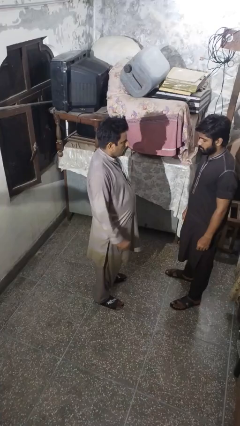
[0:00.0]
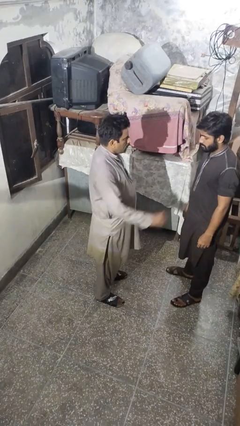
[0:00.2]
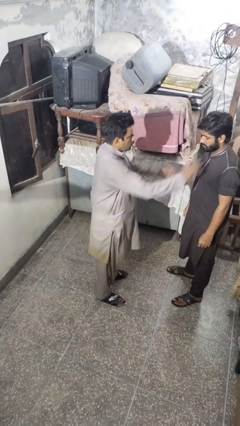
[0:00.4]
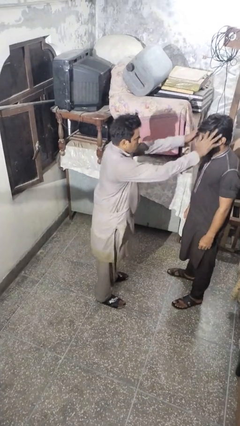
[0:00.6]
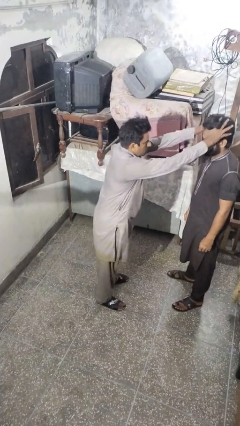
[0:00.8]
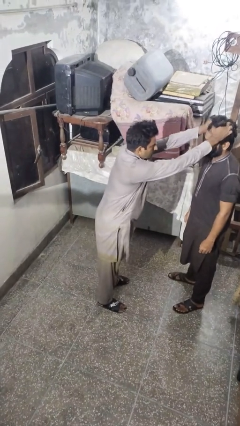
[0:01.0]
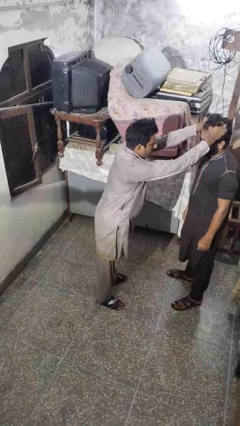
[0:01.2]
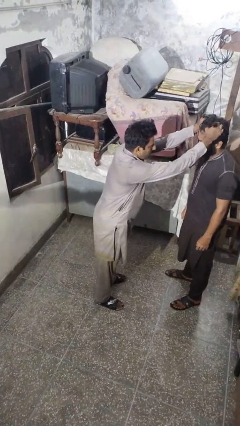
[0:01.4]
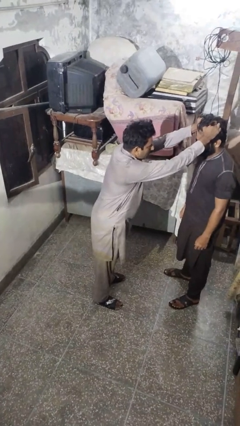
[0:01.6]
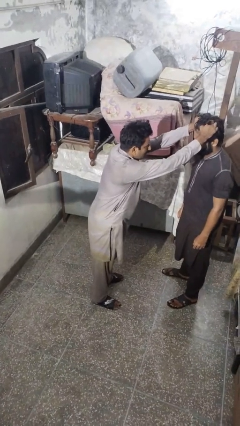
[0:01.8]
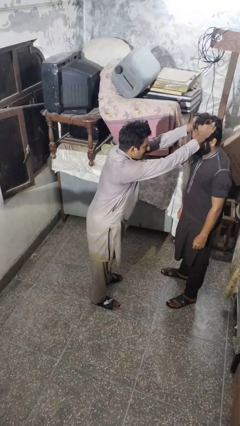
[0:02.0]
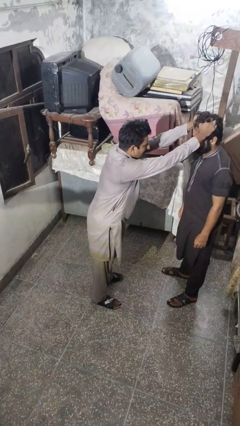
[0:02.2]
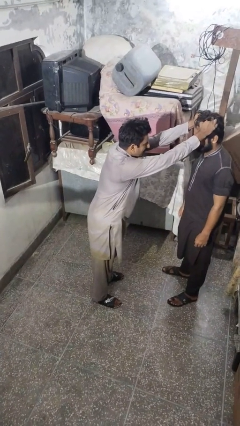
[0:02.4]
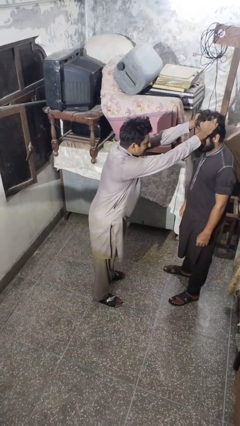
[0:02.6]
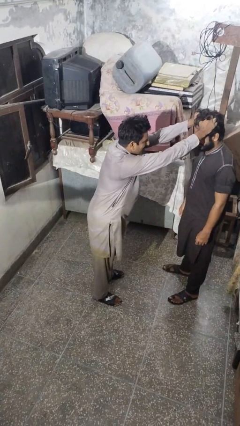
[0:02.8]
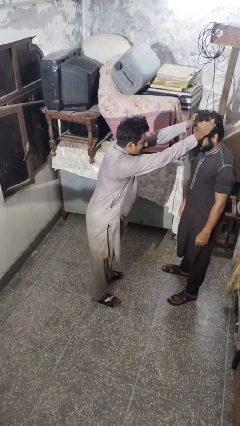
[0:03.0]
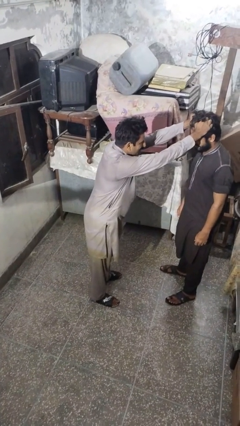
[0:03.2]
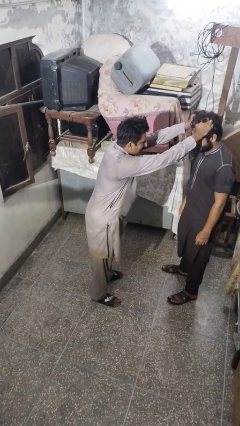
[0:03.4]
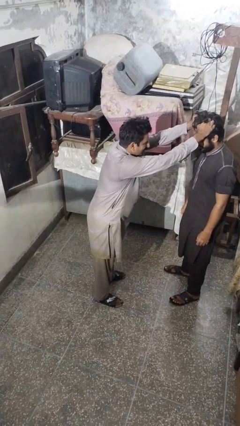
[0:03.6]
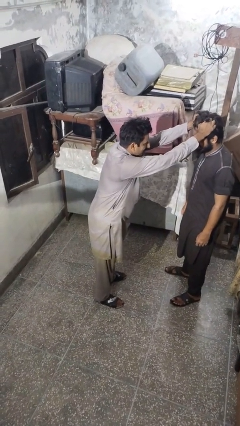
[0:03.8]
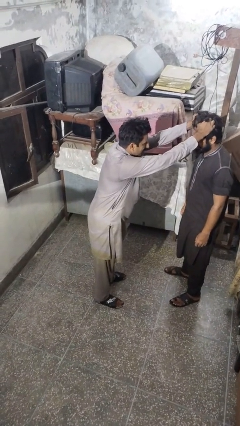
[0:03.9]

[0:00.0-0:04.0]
person grabs person by hair

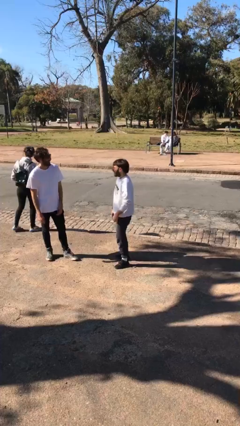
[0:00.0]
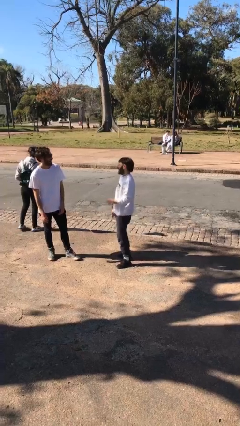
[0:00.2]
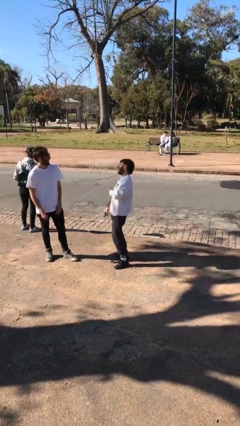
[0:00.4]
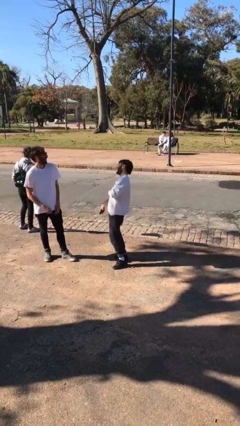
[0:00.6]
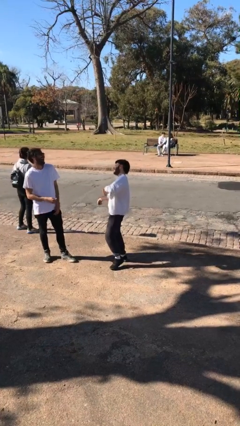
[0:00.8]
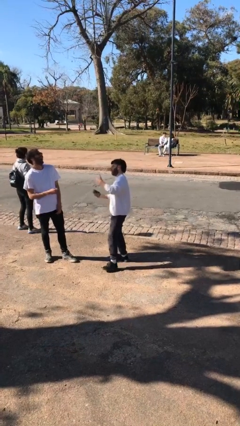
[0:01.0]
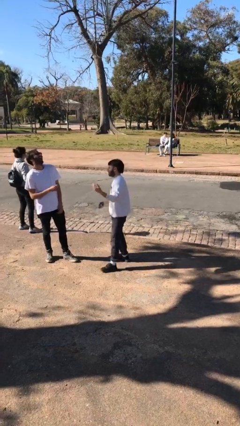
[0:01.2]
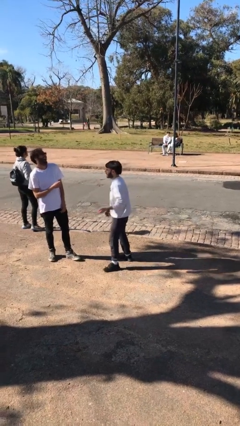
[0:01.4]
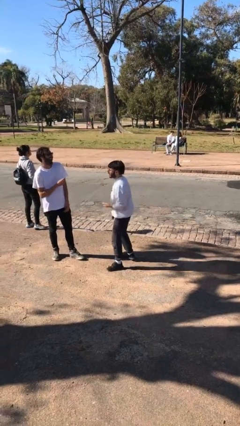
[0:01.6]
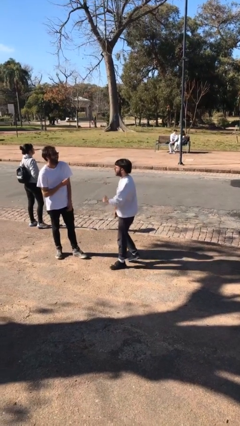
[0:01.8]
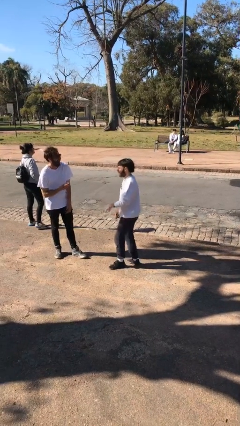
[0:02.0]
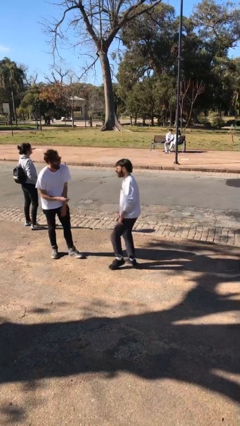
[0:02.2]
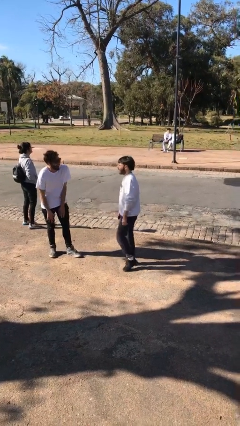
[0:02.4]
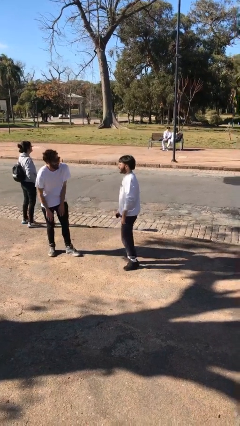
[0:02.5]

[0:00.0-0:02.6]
person laughs with person

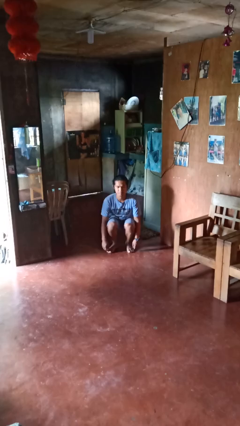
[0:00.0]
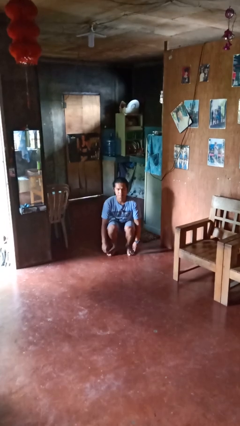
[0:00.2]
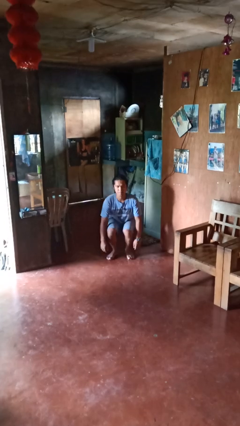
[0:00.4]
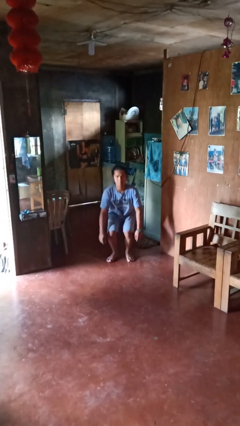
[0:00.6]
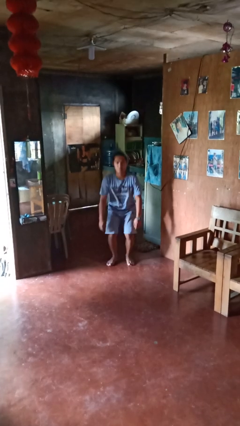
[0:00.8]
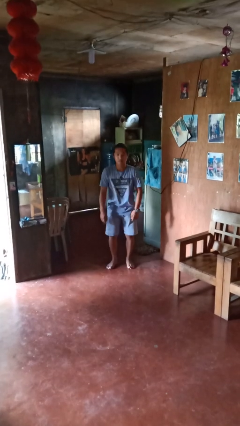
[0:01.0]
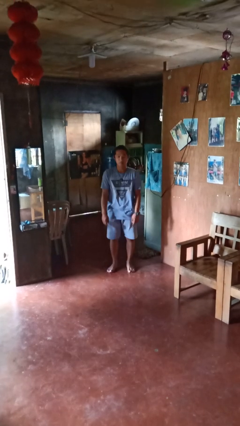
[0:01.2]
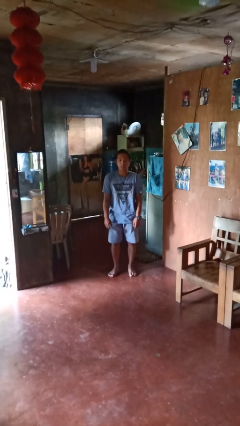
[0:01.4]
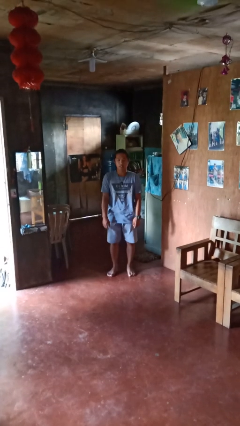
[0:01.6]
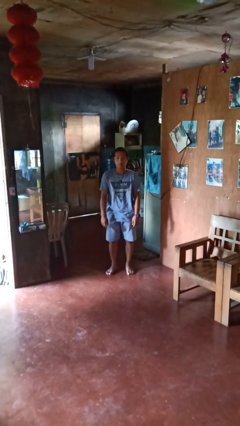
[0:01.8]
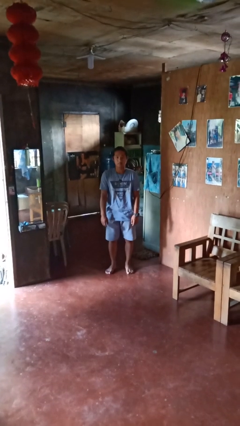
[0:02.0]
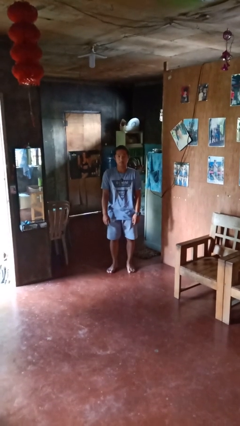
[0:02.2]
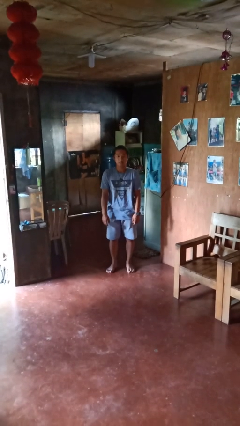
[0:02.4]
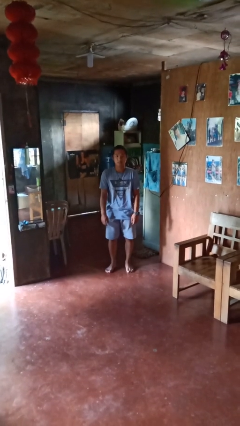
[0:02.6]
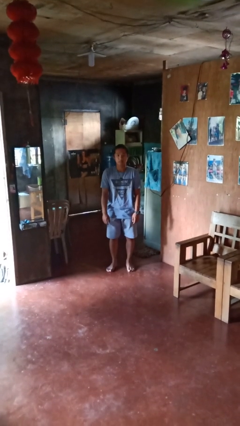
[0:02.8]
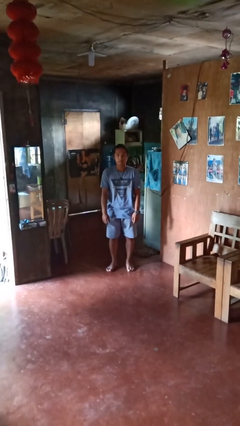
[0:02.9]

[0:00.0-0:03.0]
person stands up

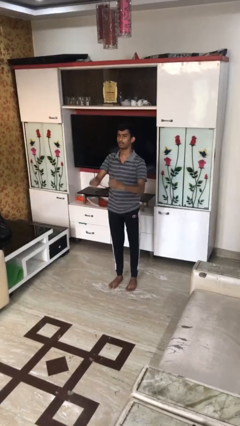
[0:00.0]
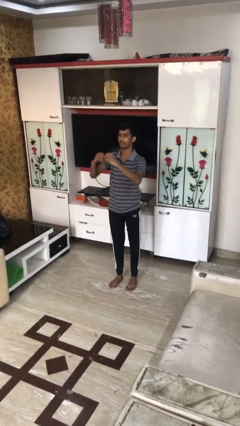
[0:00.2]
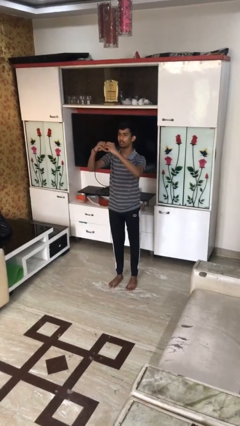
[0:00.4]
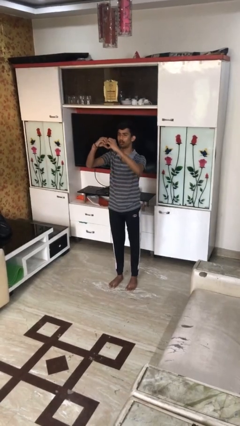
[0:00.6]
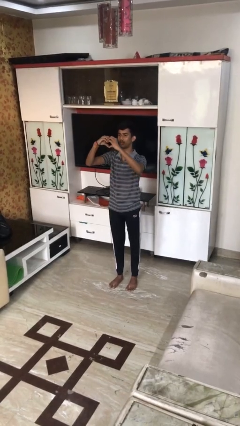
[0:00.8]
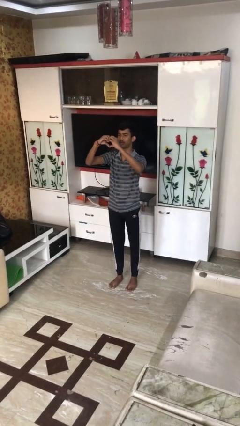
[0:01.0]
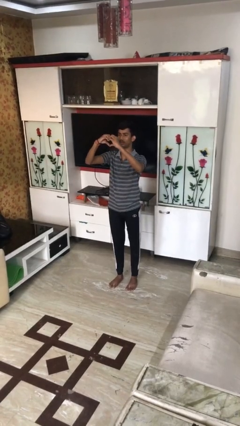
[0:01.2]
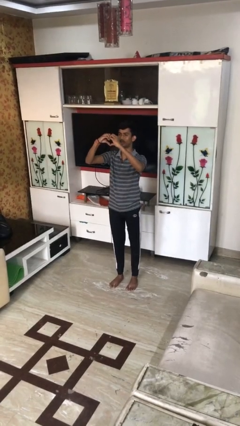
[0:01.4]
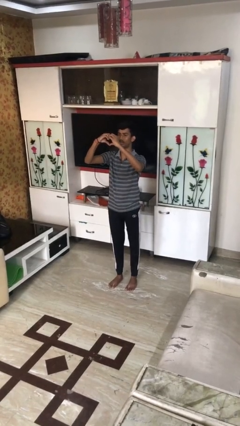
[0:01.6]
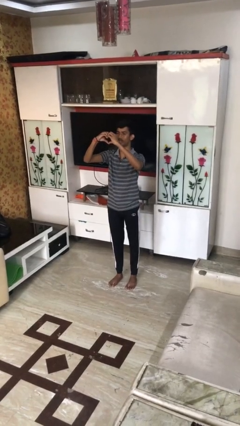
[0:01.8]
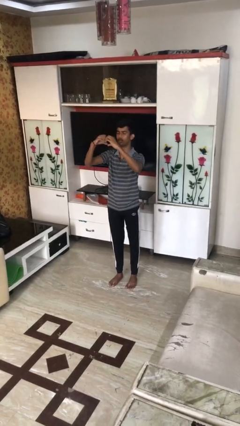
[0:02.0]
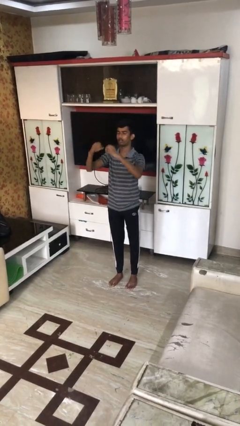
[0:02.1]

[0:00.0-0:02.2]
person gestures heart

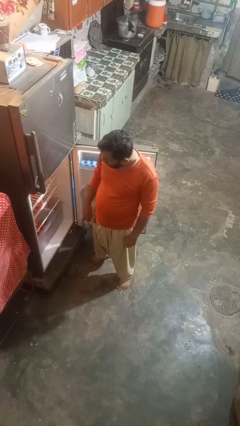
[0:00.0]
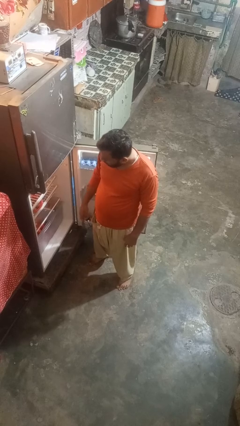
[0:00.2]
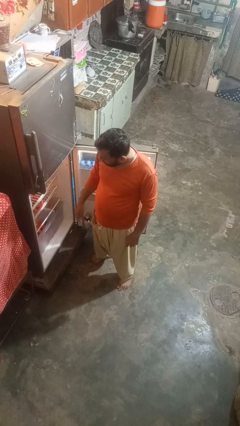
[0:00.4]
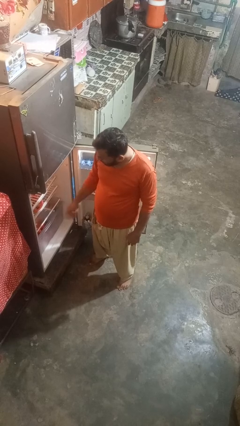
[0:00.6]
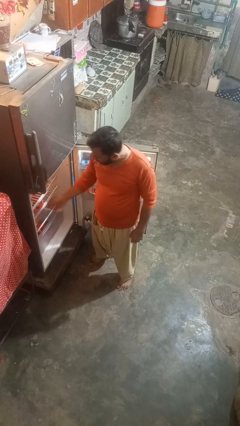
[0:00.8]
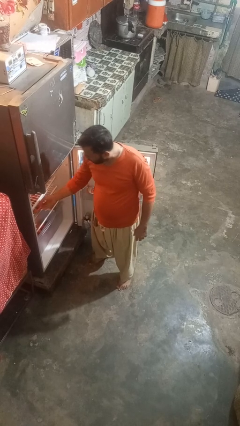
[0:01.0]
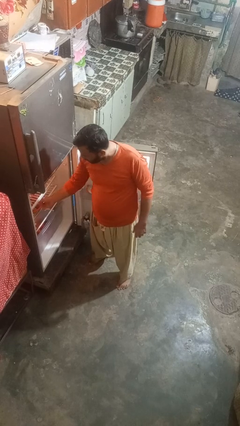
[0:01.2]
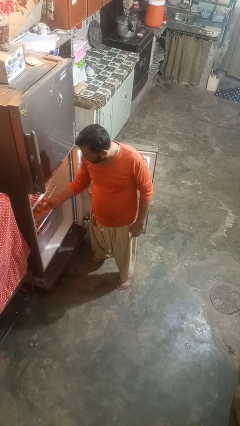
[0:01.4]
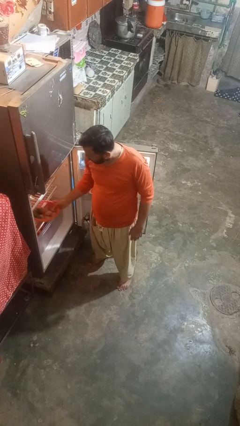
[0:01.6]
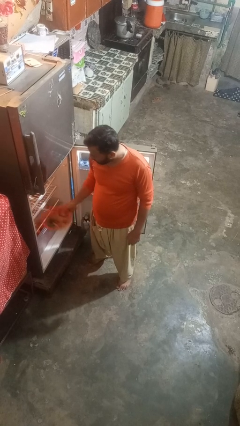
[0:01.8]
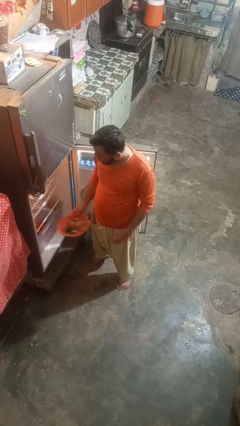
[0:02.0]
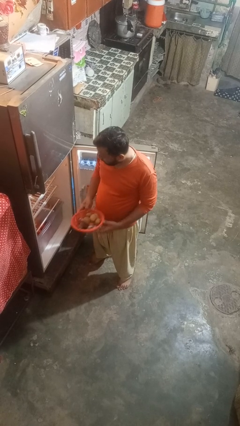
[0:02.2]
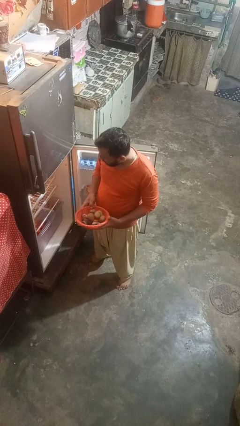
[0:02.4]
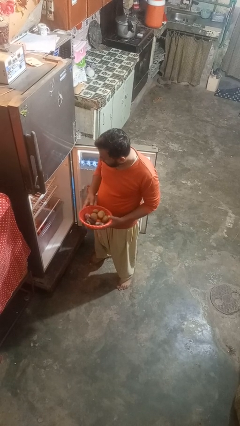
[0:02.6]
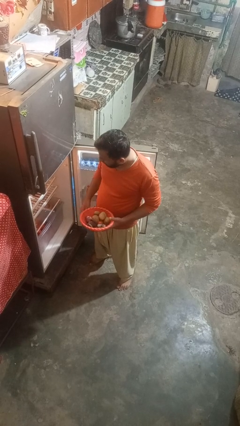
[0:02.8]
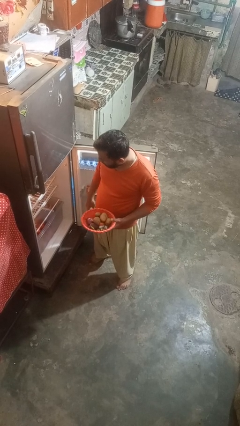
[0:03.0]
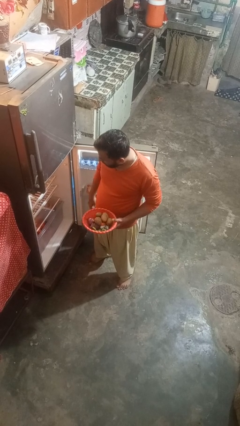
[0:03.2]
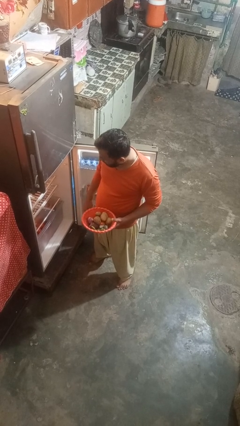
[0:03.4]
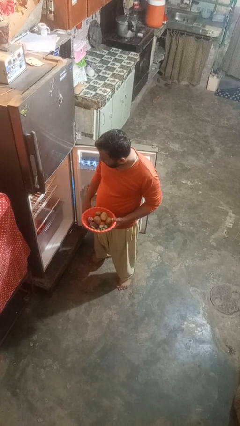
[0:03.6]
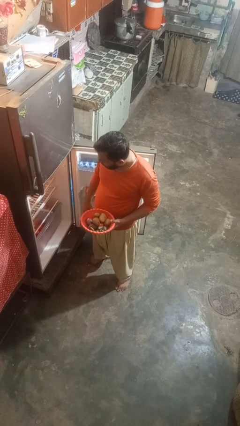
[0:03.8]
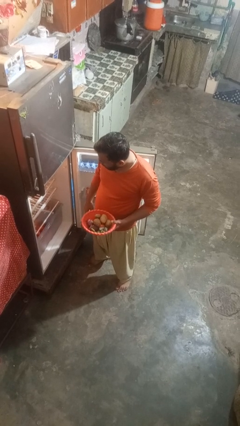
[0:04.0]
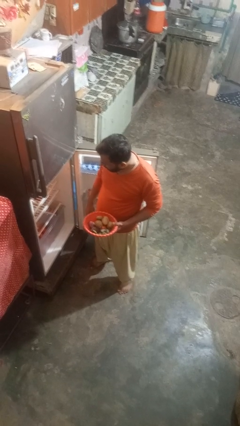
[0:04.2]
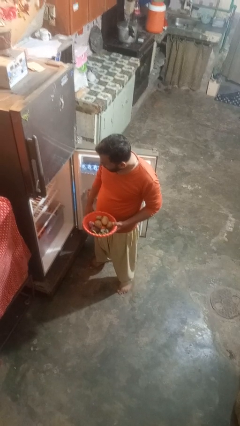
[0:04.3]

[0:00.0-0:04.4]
person takes object from refrigerator

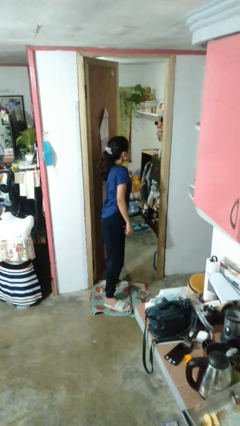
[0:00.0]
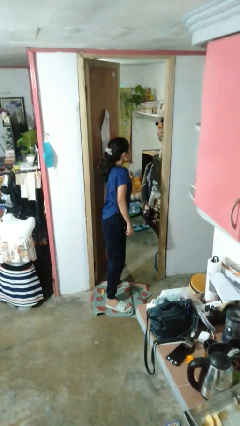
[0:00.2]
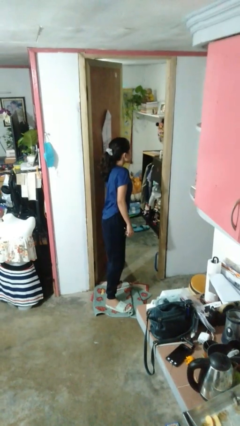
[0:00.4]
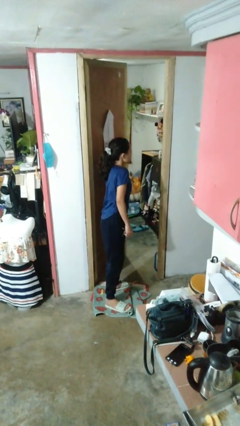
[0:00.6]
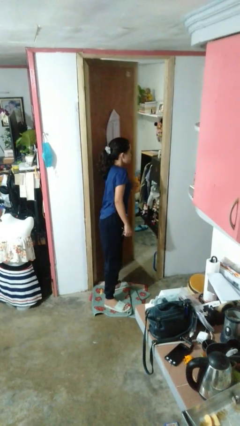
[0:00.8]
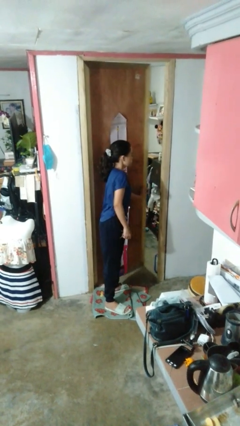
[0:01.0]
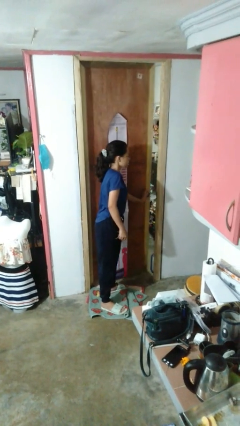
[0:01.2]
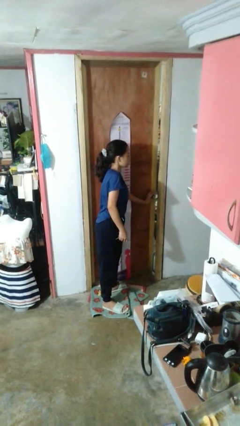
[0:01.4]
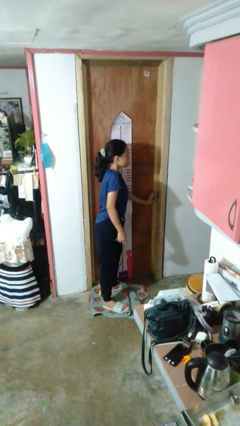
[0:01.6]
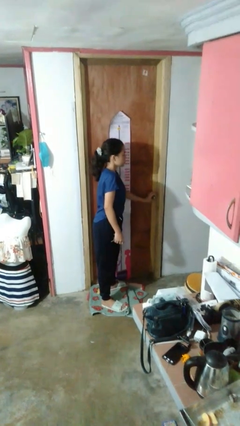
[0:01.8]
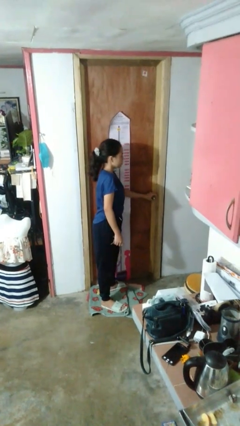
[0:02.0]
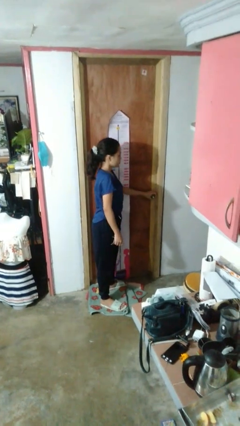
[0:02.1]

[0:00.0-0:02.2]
person closes facility door
